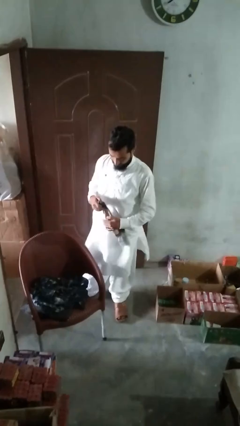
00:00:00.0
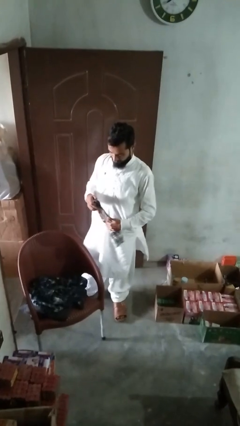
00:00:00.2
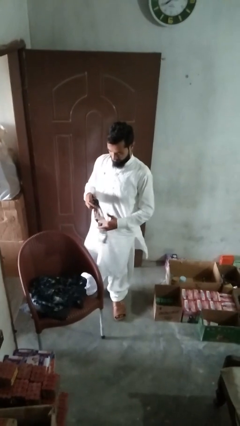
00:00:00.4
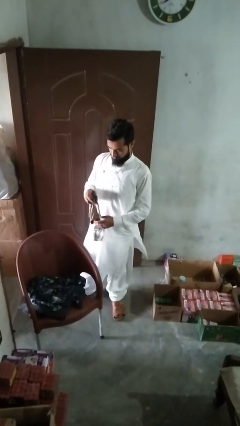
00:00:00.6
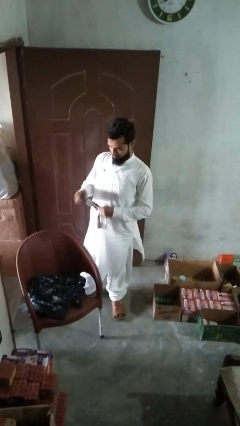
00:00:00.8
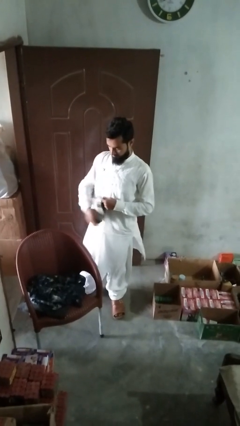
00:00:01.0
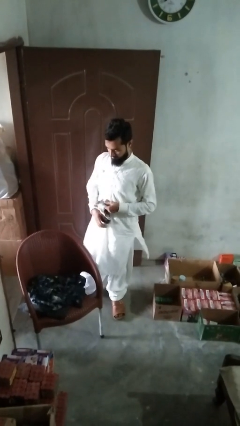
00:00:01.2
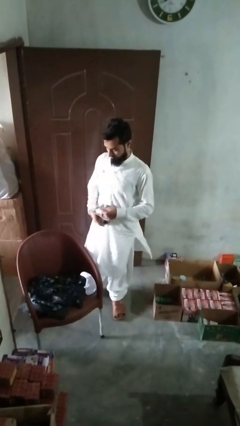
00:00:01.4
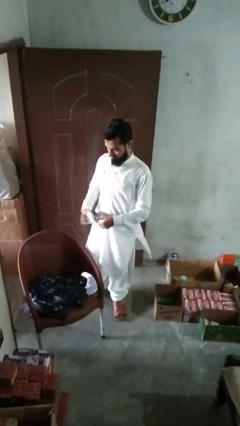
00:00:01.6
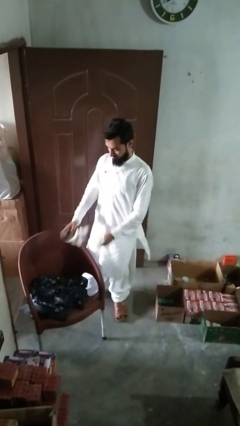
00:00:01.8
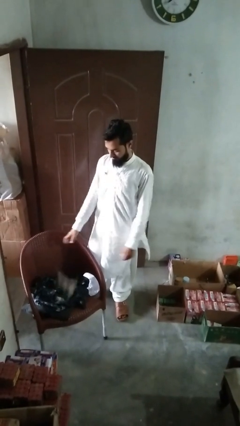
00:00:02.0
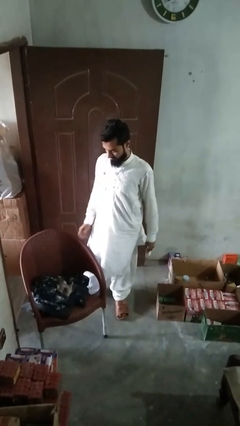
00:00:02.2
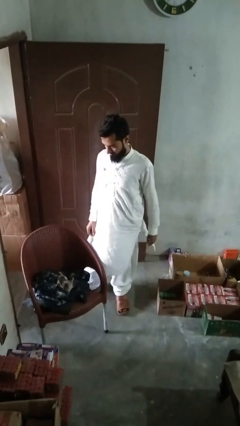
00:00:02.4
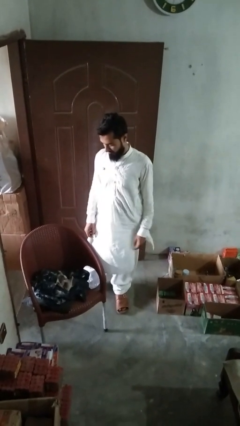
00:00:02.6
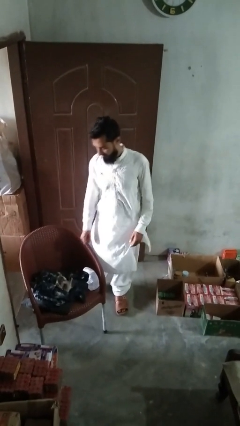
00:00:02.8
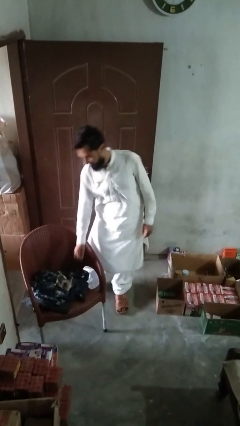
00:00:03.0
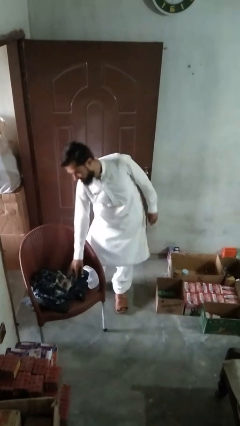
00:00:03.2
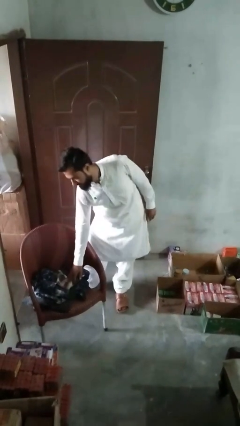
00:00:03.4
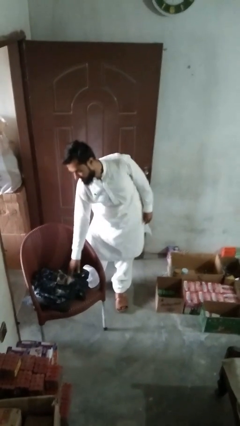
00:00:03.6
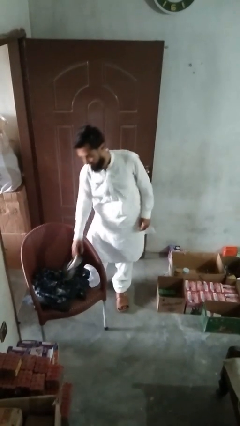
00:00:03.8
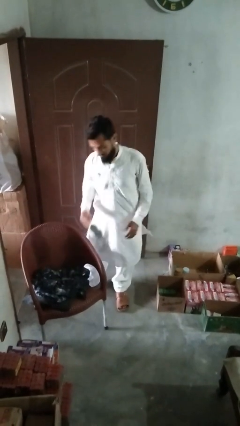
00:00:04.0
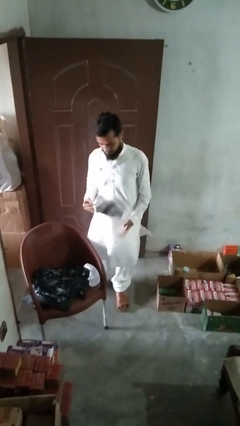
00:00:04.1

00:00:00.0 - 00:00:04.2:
person folds socks

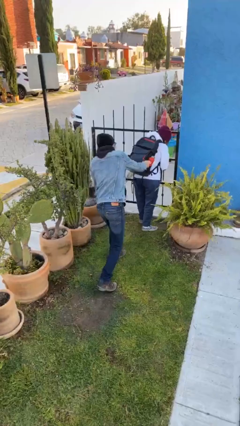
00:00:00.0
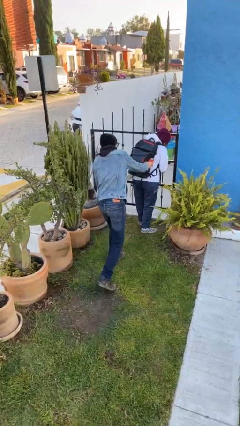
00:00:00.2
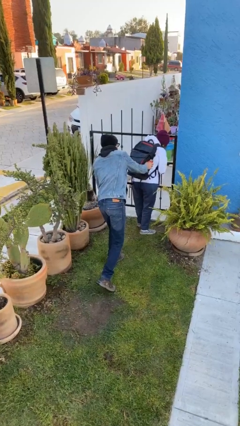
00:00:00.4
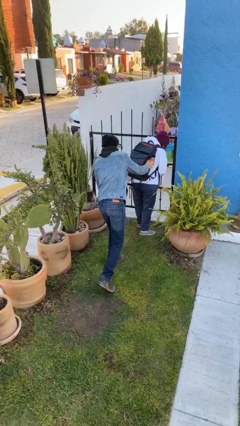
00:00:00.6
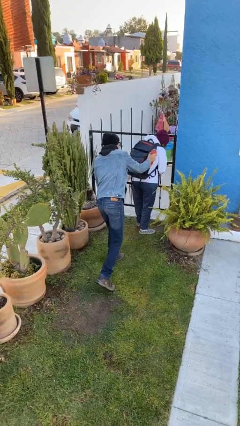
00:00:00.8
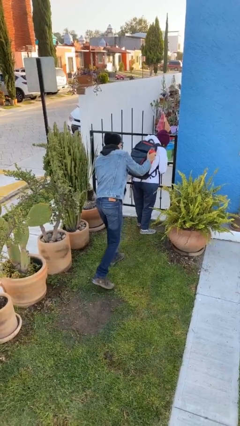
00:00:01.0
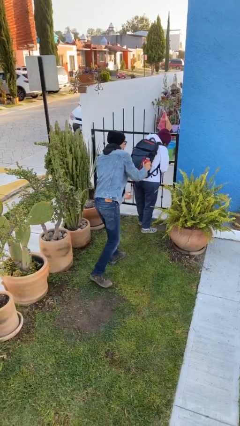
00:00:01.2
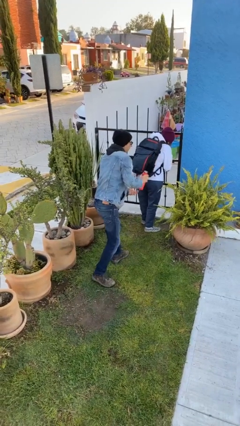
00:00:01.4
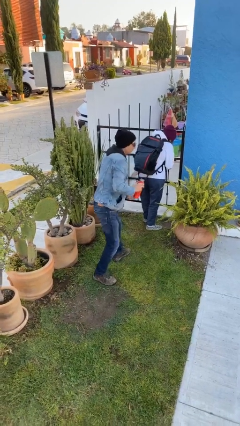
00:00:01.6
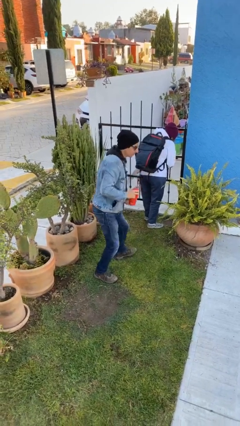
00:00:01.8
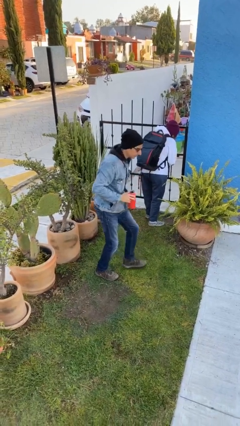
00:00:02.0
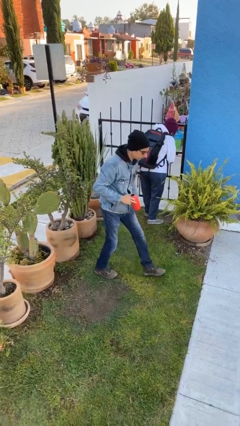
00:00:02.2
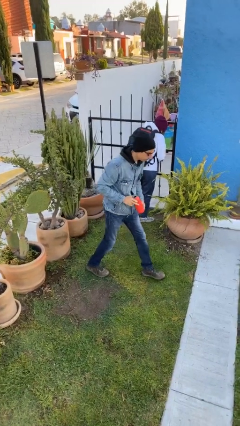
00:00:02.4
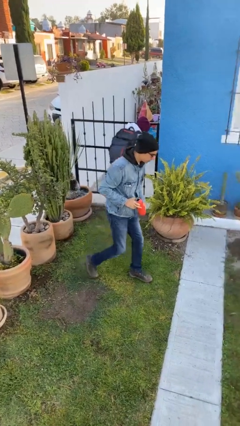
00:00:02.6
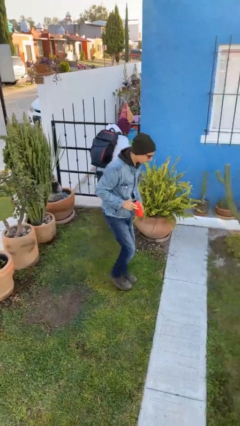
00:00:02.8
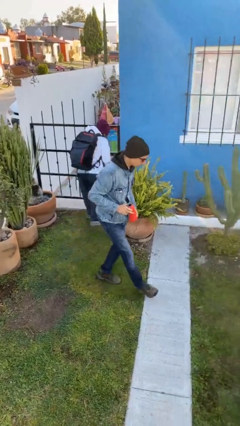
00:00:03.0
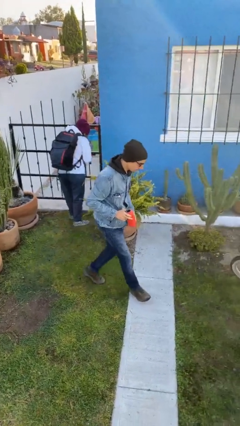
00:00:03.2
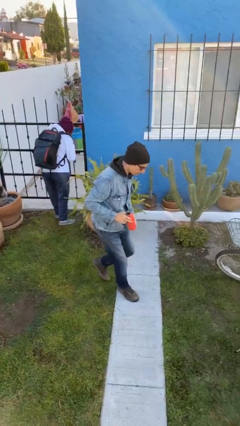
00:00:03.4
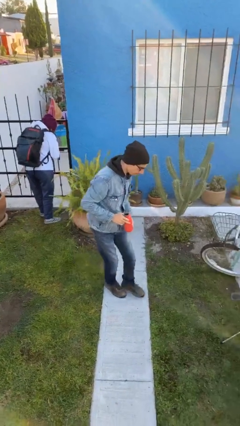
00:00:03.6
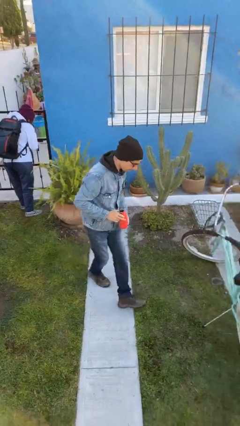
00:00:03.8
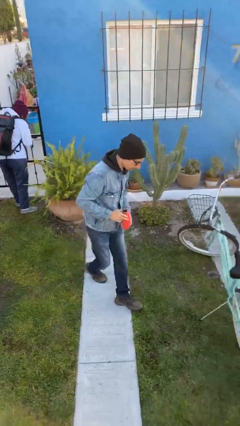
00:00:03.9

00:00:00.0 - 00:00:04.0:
person steals object from person

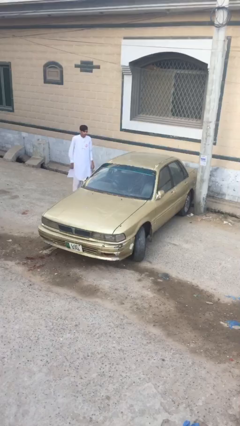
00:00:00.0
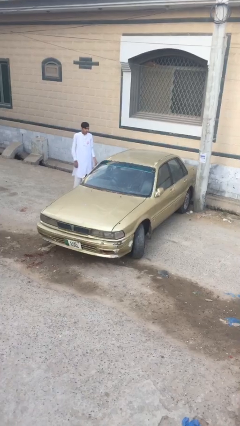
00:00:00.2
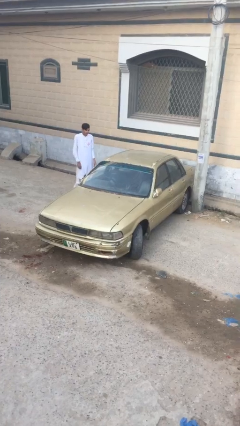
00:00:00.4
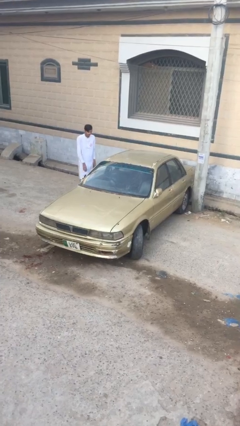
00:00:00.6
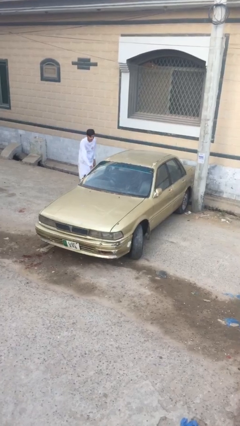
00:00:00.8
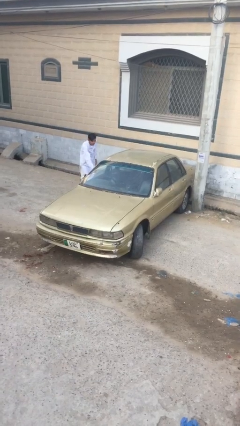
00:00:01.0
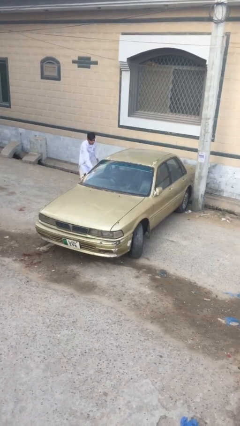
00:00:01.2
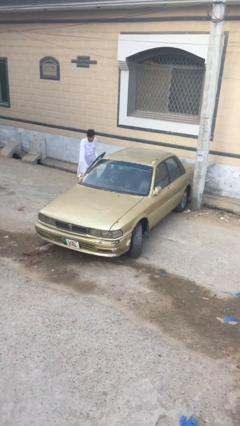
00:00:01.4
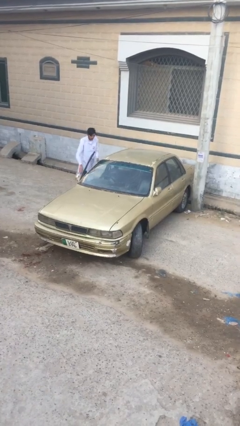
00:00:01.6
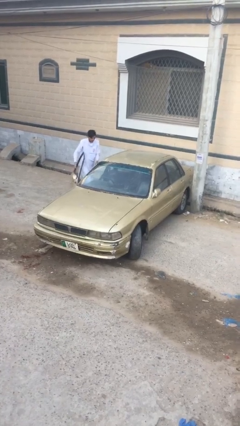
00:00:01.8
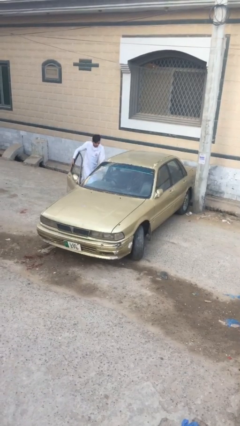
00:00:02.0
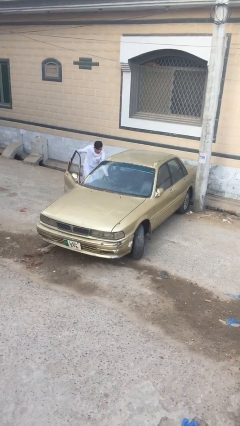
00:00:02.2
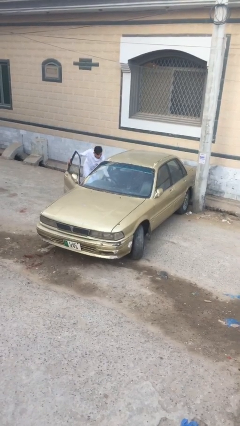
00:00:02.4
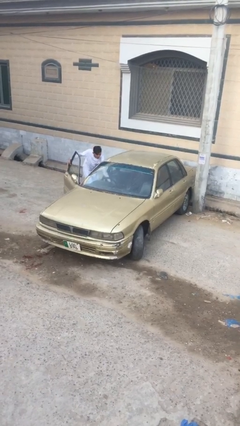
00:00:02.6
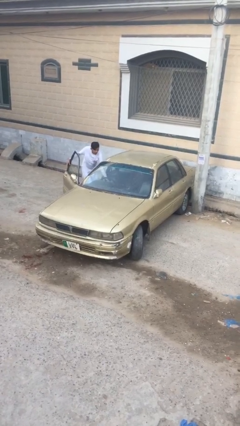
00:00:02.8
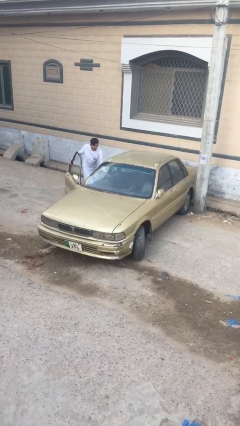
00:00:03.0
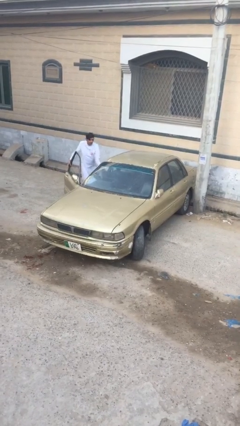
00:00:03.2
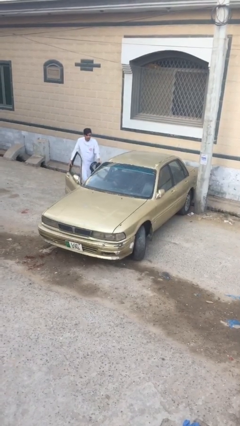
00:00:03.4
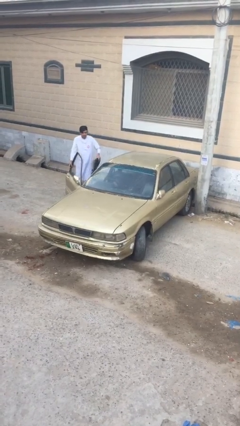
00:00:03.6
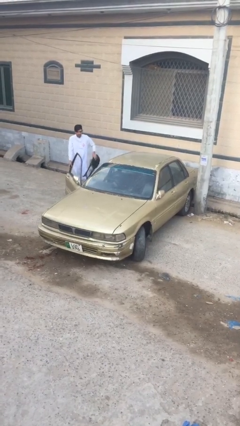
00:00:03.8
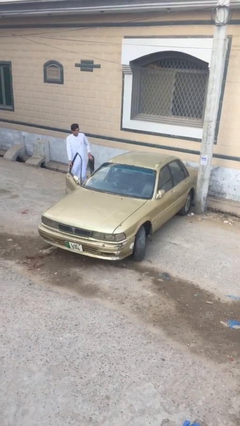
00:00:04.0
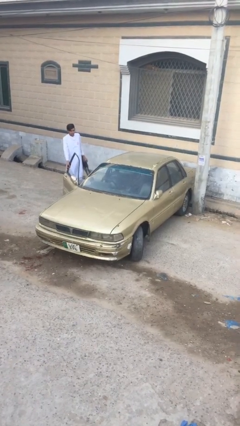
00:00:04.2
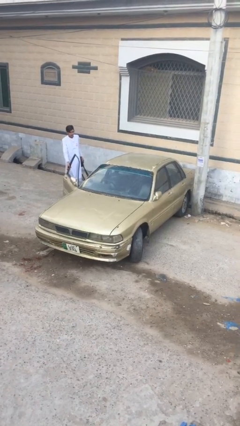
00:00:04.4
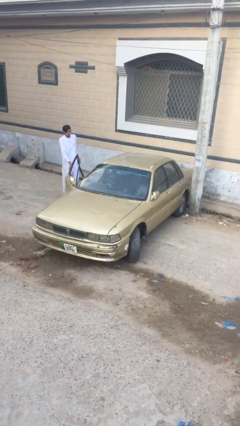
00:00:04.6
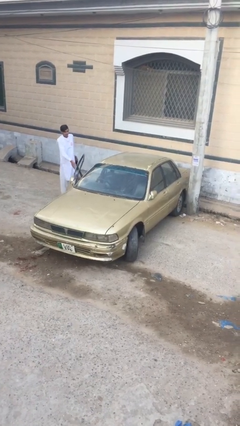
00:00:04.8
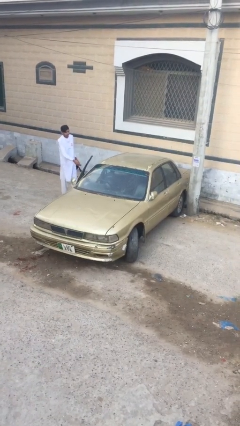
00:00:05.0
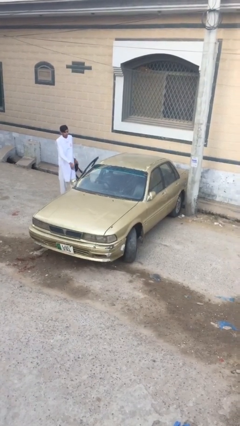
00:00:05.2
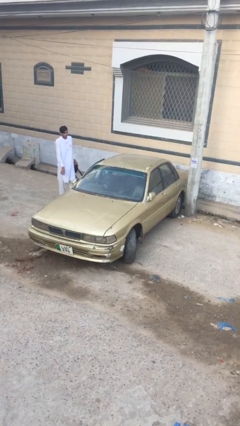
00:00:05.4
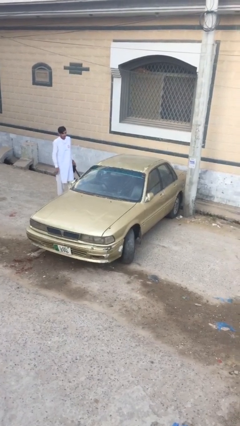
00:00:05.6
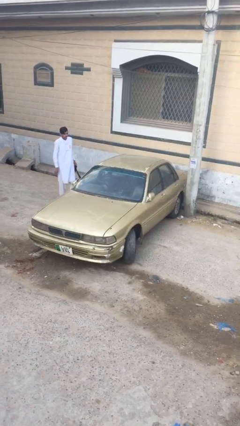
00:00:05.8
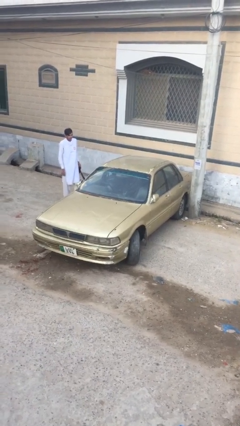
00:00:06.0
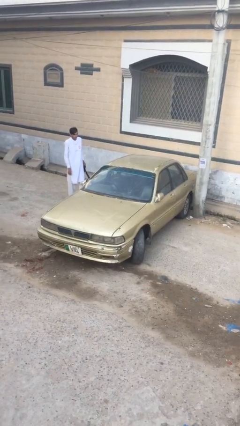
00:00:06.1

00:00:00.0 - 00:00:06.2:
person unloads car

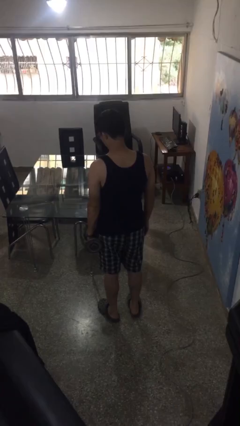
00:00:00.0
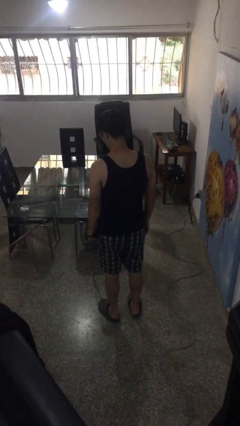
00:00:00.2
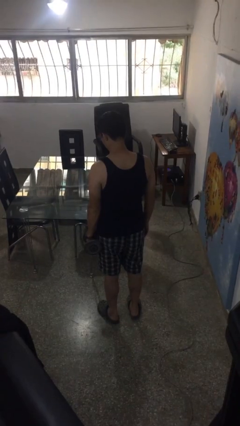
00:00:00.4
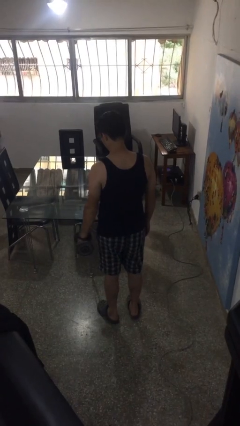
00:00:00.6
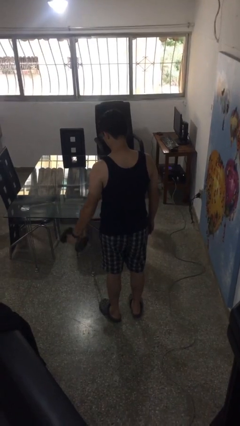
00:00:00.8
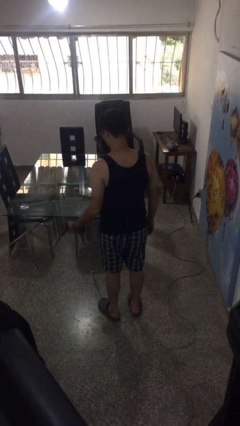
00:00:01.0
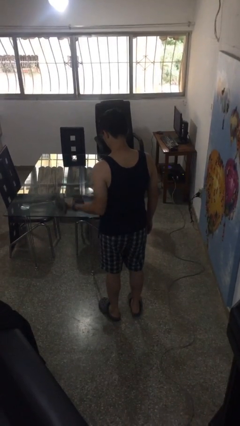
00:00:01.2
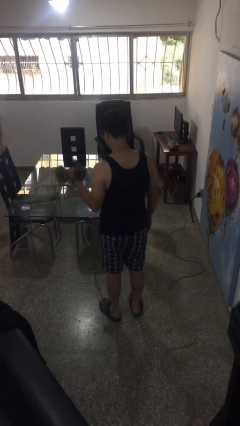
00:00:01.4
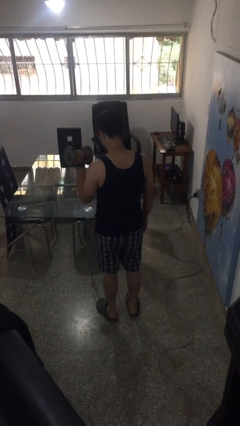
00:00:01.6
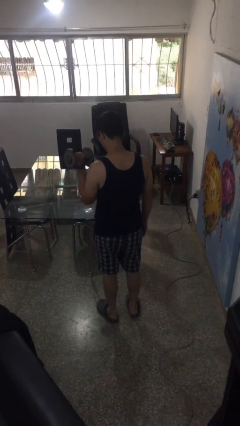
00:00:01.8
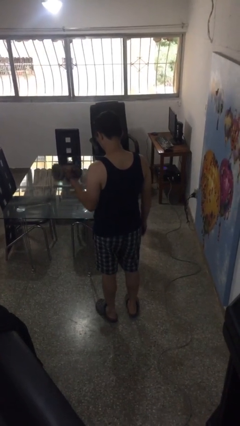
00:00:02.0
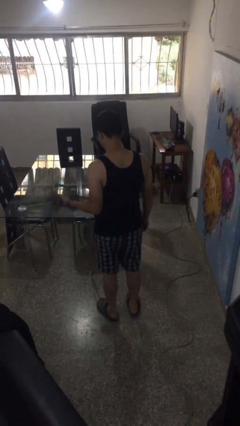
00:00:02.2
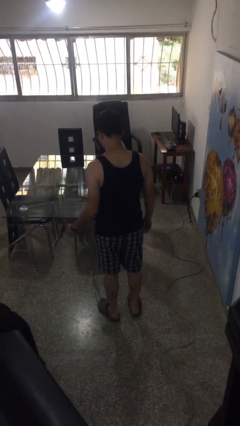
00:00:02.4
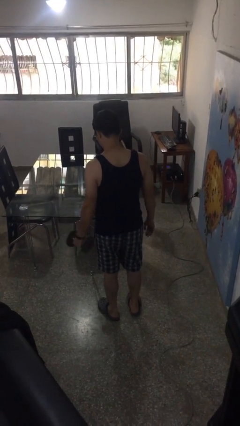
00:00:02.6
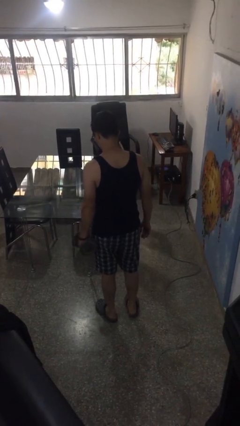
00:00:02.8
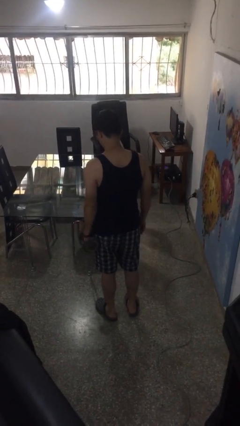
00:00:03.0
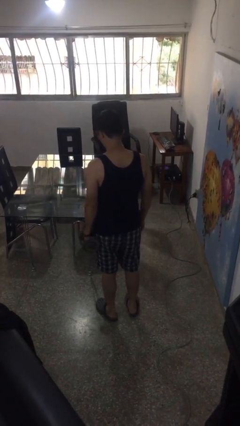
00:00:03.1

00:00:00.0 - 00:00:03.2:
person lifts dumbbells
